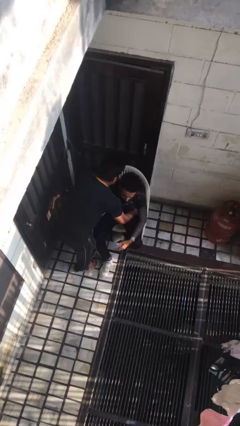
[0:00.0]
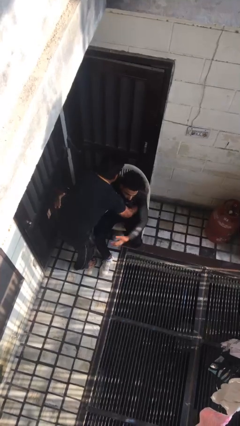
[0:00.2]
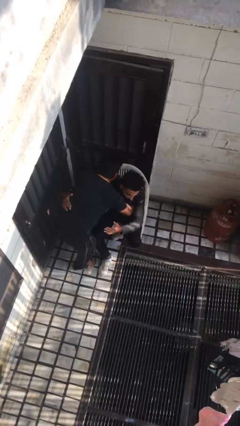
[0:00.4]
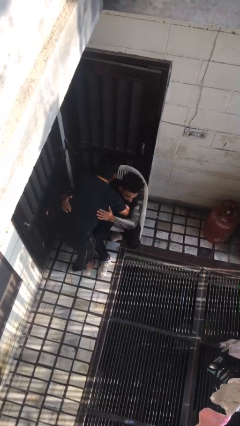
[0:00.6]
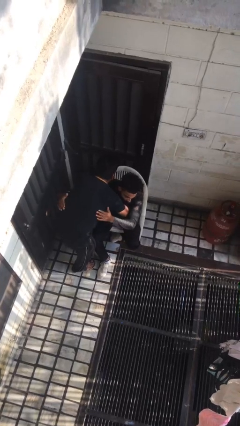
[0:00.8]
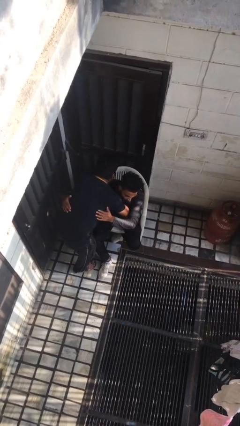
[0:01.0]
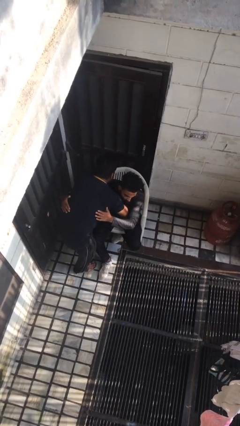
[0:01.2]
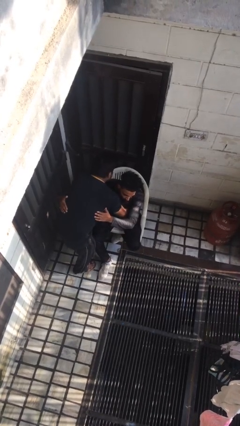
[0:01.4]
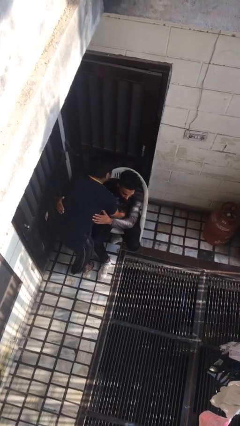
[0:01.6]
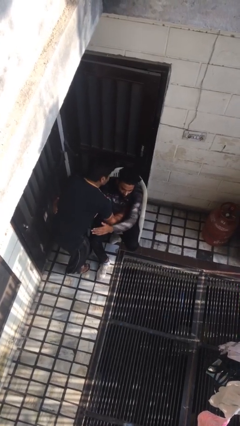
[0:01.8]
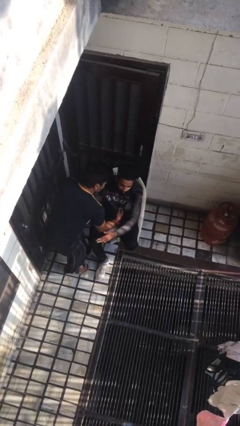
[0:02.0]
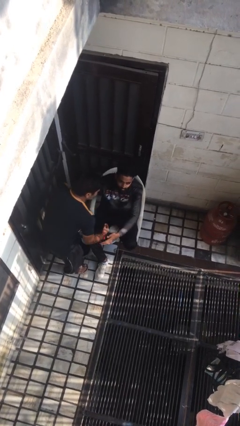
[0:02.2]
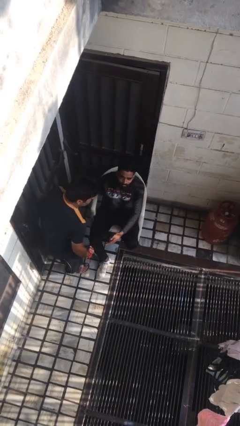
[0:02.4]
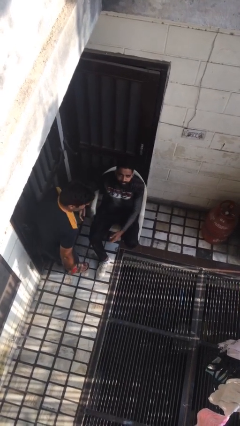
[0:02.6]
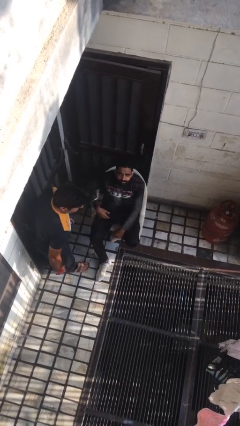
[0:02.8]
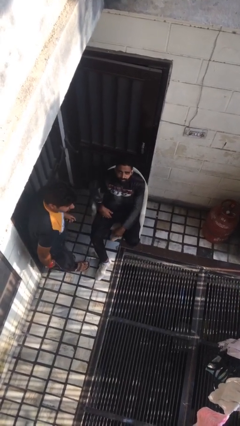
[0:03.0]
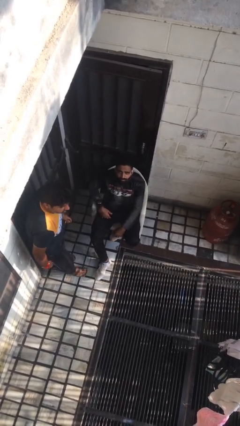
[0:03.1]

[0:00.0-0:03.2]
person embraces person

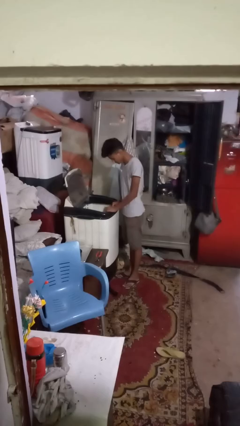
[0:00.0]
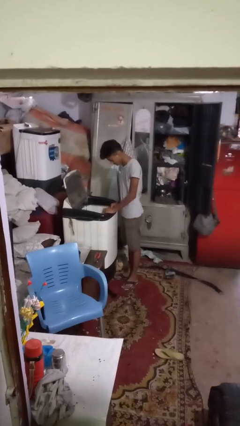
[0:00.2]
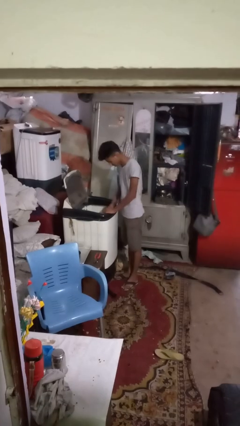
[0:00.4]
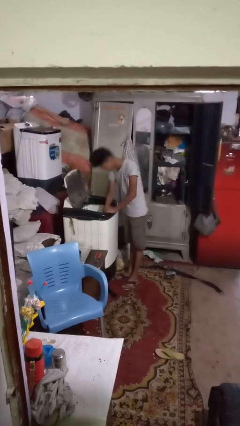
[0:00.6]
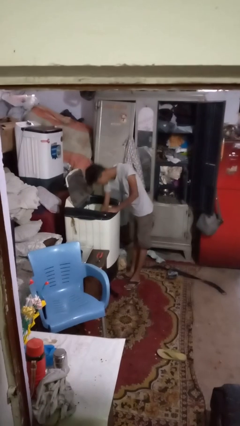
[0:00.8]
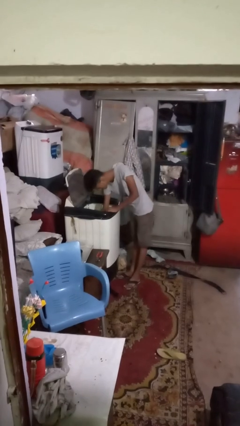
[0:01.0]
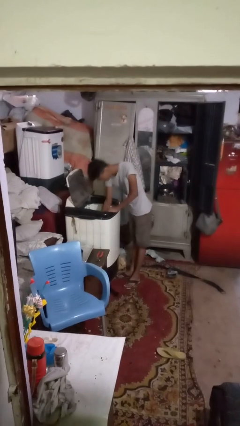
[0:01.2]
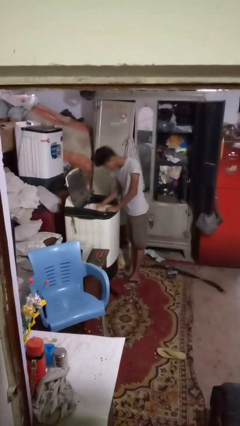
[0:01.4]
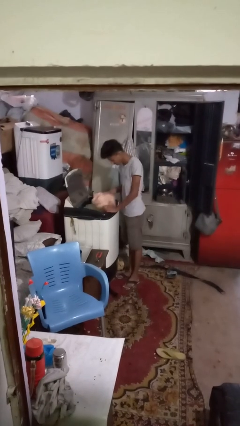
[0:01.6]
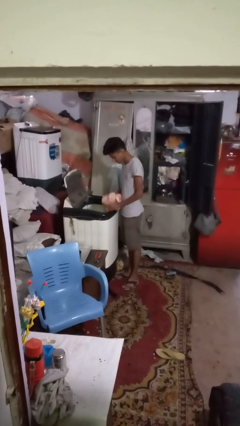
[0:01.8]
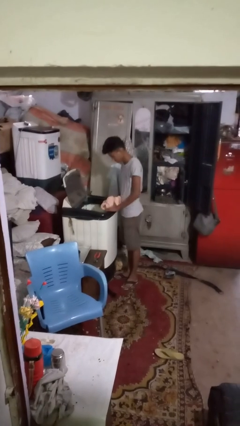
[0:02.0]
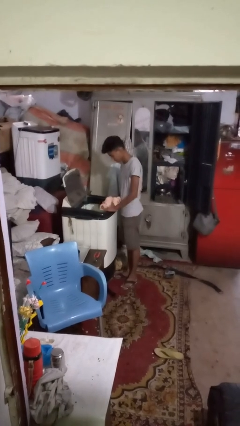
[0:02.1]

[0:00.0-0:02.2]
person unloads clotheswasher

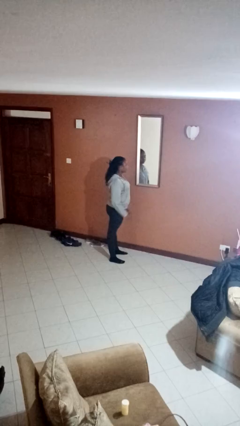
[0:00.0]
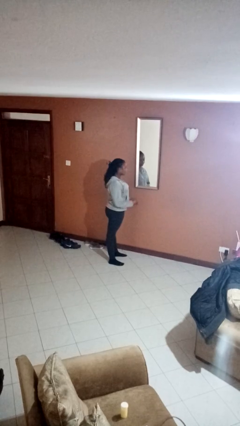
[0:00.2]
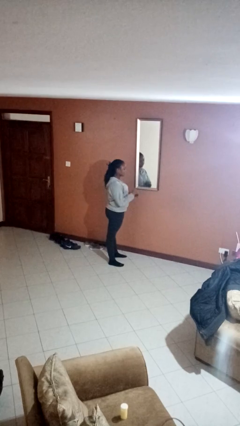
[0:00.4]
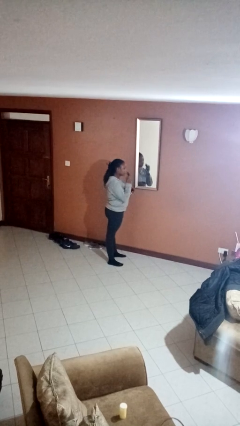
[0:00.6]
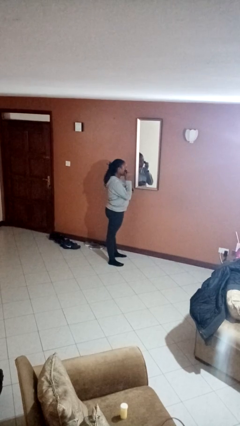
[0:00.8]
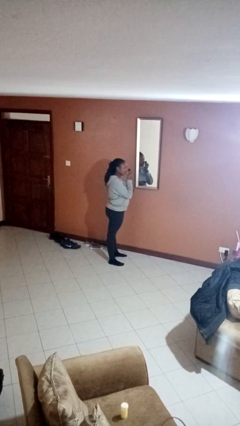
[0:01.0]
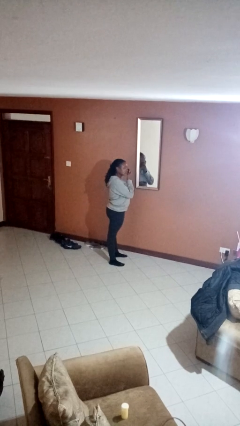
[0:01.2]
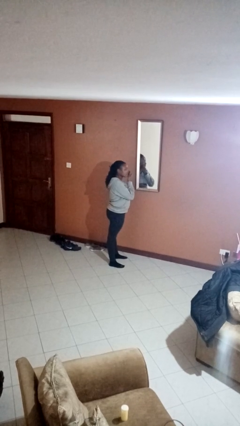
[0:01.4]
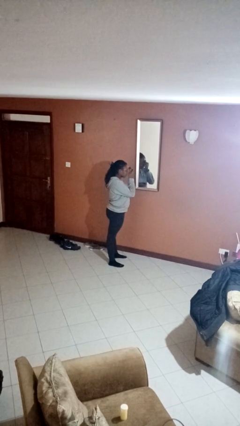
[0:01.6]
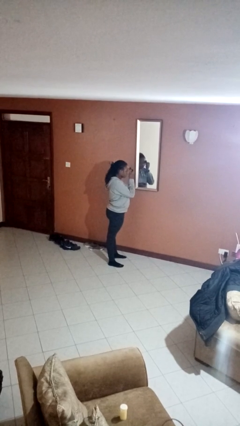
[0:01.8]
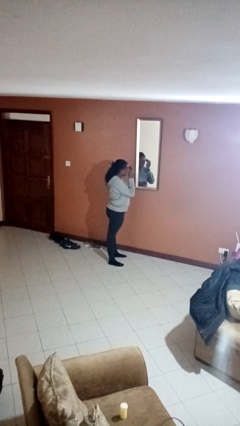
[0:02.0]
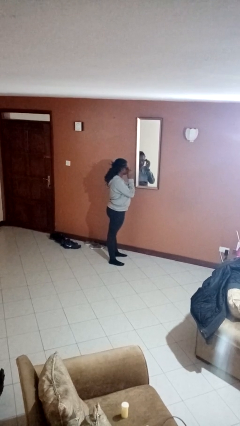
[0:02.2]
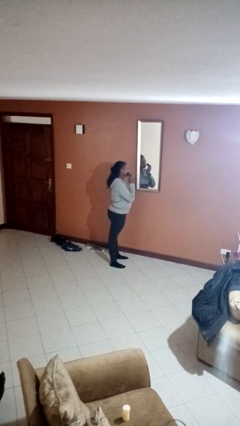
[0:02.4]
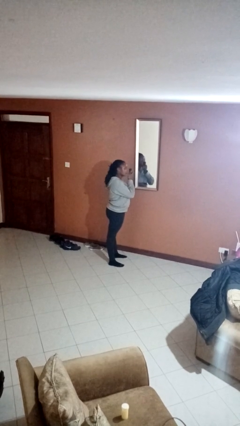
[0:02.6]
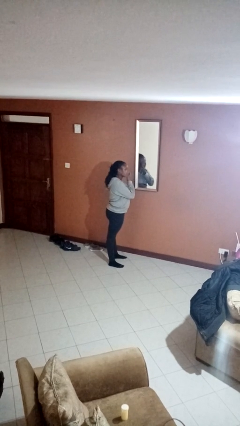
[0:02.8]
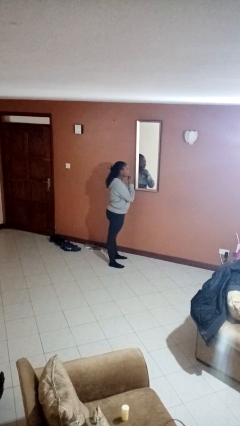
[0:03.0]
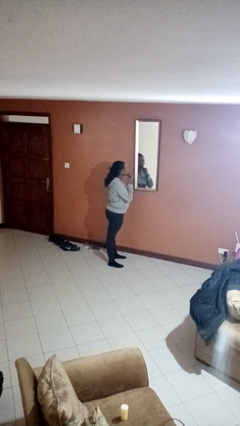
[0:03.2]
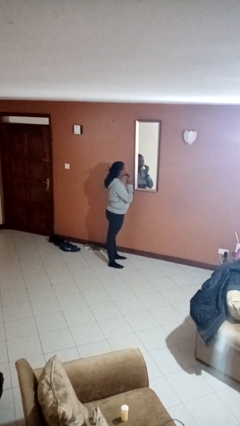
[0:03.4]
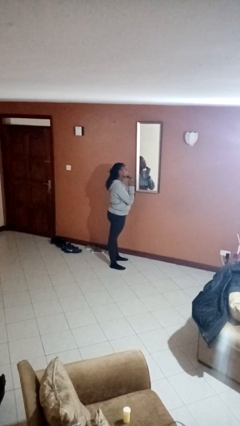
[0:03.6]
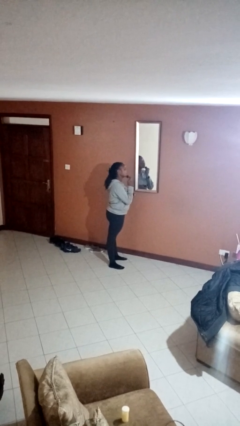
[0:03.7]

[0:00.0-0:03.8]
person applies foundation makeup

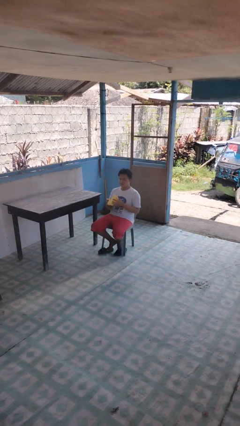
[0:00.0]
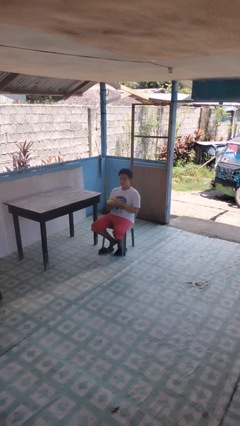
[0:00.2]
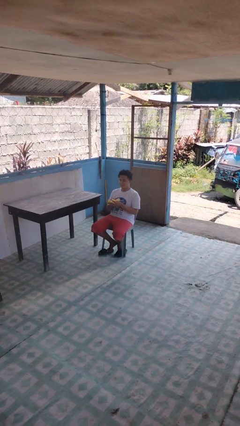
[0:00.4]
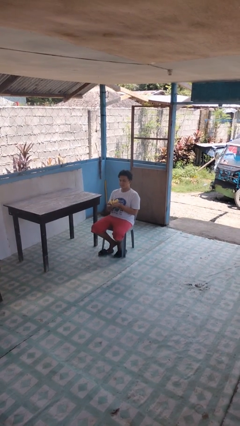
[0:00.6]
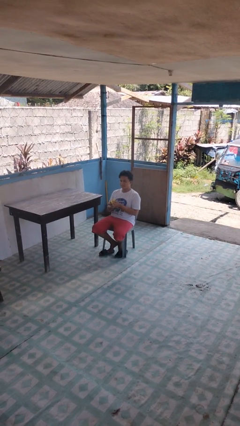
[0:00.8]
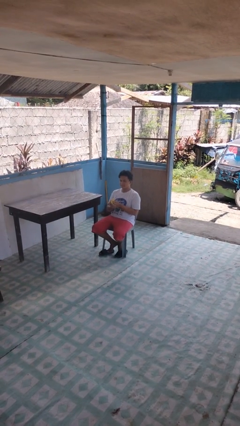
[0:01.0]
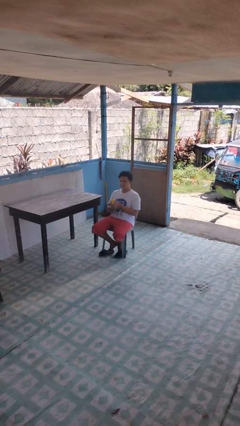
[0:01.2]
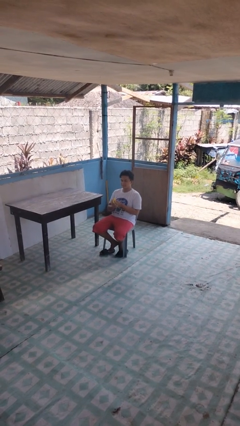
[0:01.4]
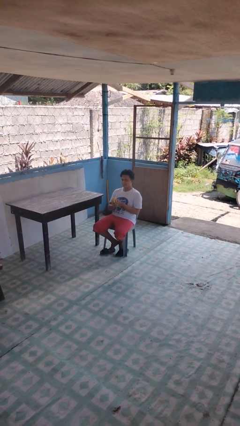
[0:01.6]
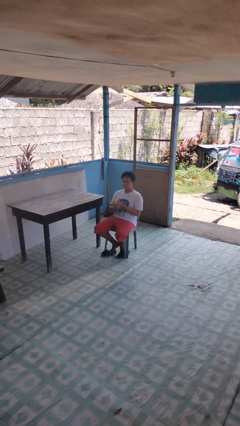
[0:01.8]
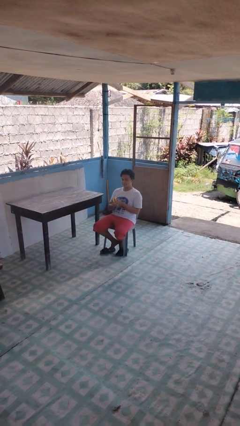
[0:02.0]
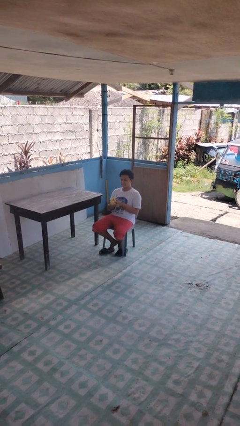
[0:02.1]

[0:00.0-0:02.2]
person crumples paper

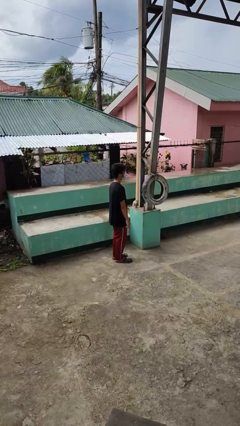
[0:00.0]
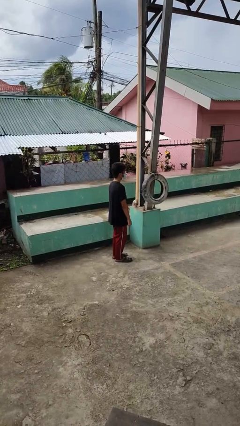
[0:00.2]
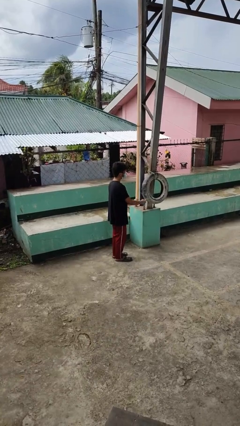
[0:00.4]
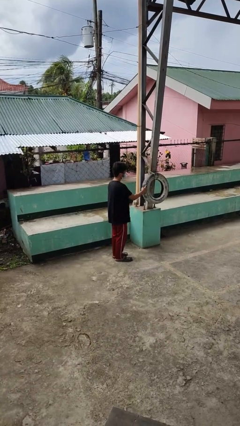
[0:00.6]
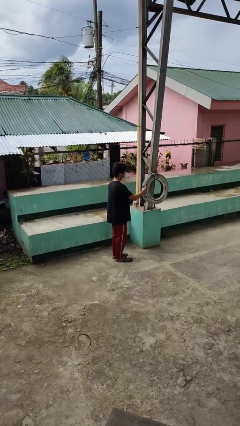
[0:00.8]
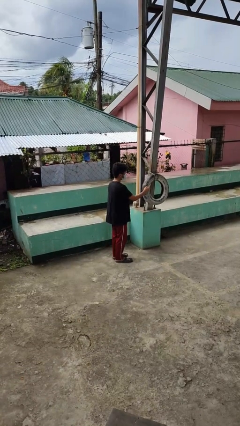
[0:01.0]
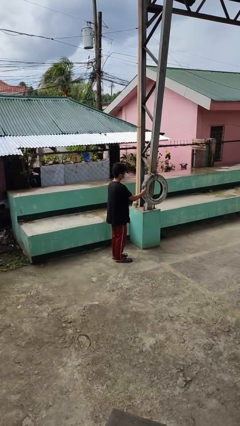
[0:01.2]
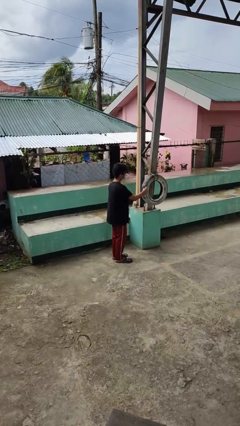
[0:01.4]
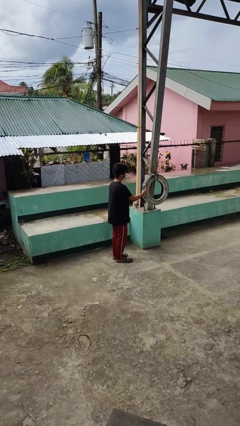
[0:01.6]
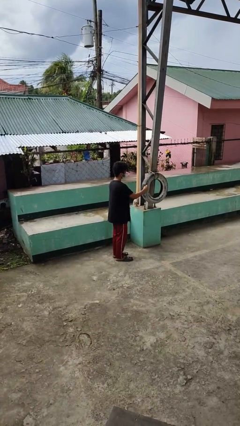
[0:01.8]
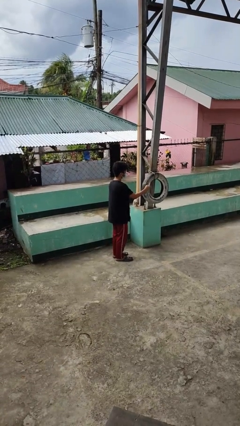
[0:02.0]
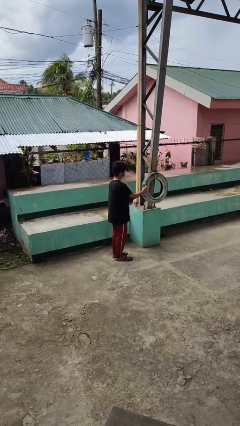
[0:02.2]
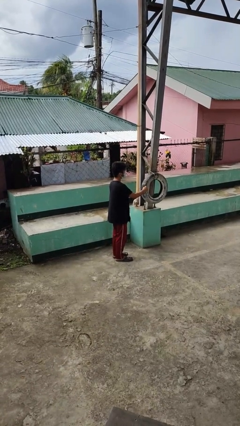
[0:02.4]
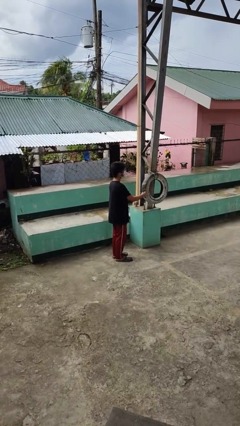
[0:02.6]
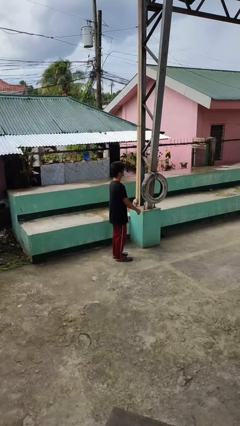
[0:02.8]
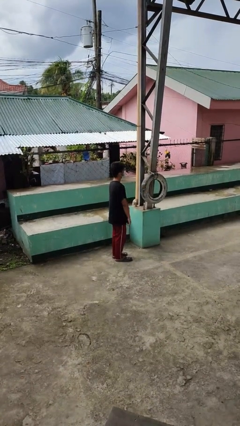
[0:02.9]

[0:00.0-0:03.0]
person taps object with finger

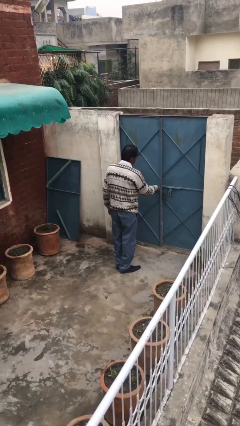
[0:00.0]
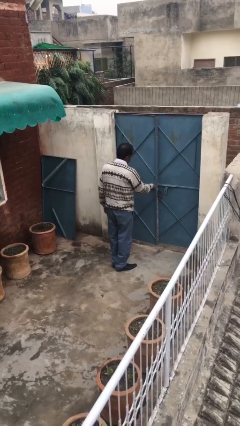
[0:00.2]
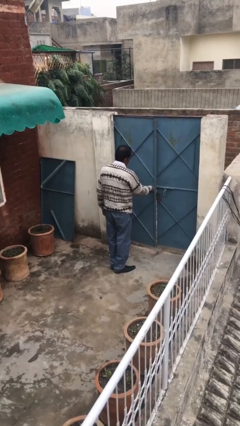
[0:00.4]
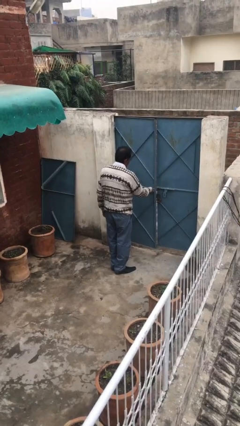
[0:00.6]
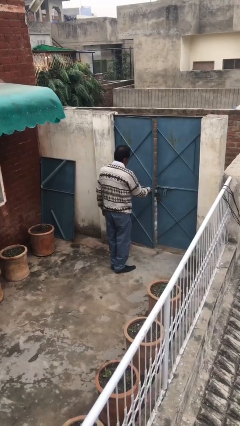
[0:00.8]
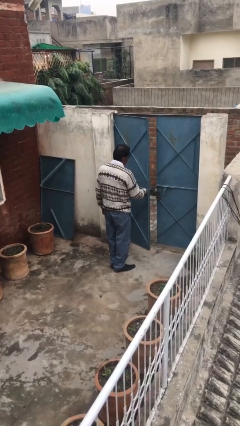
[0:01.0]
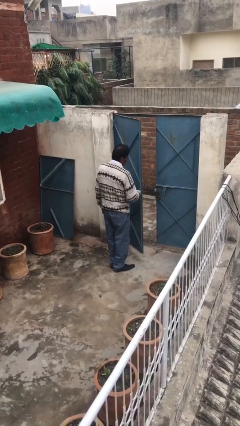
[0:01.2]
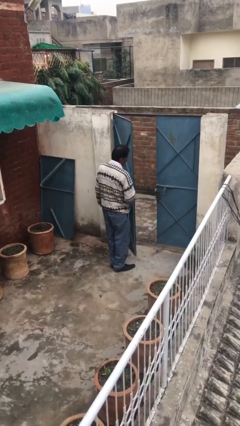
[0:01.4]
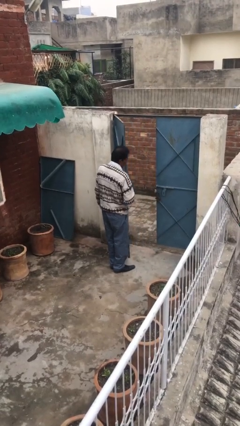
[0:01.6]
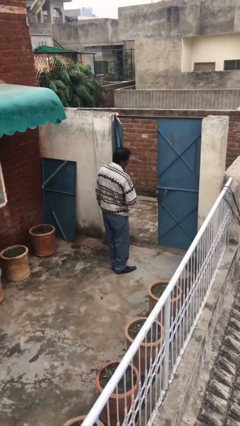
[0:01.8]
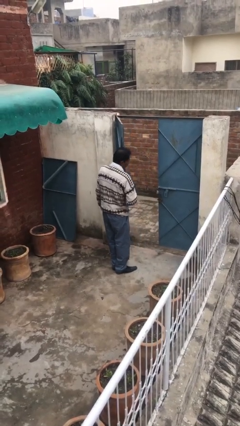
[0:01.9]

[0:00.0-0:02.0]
person opens facility door

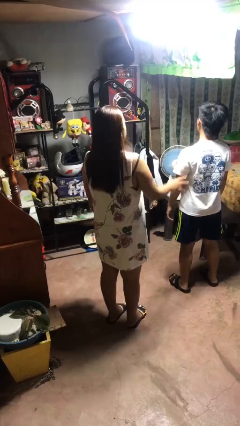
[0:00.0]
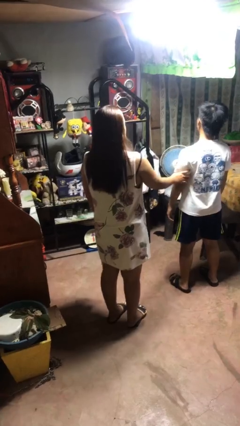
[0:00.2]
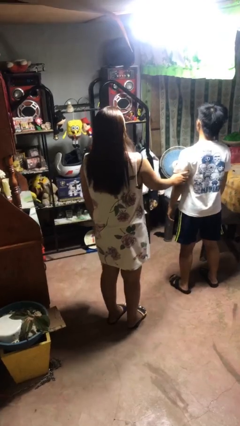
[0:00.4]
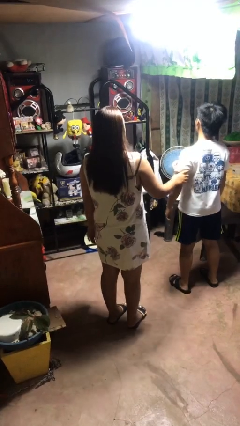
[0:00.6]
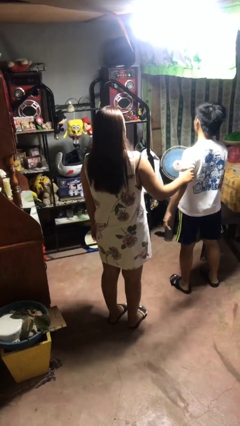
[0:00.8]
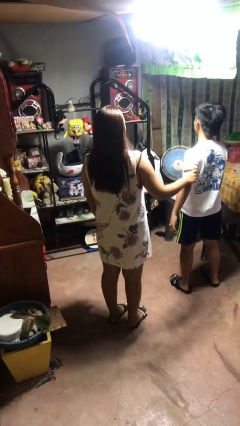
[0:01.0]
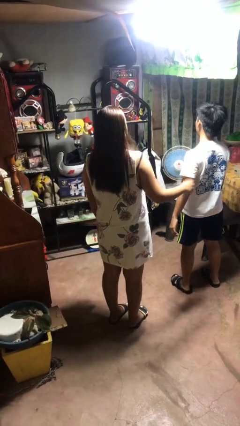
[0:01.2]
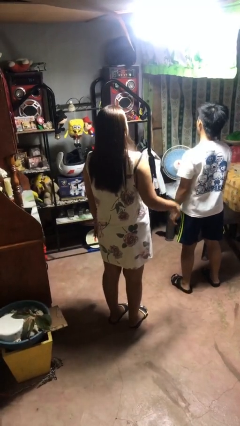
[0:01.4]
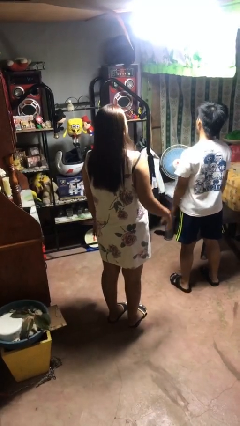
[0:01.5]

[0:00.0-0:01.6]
person grabs person by bicep
